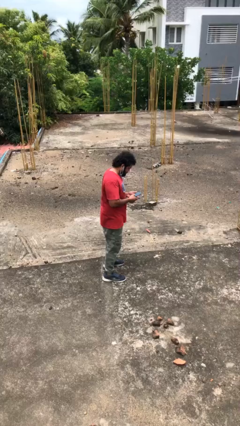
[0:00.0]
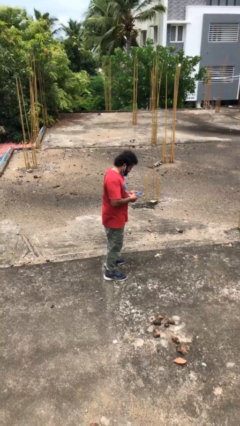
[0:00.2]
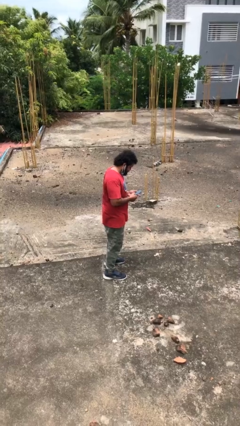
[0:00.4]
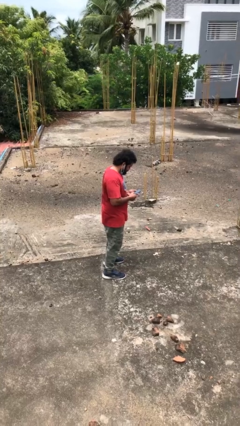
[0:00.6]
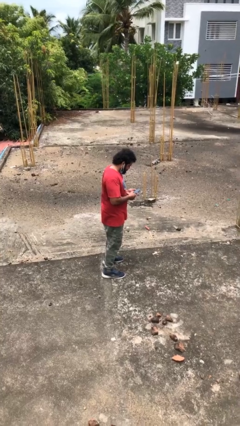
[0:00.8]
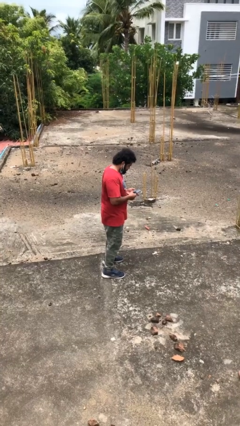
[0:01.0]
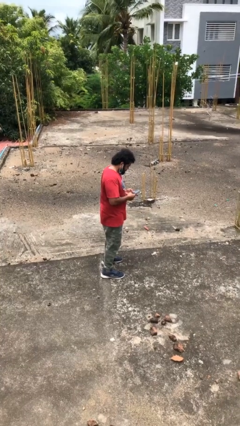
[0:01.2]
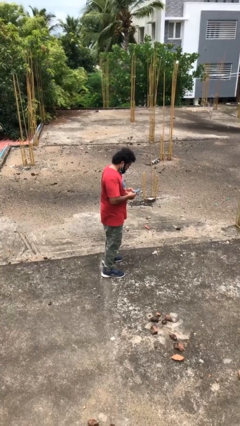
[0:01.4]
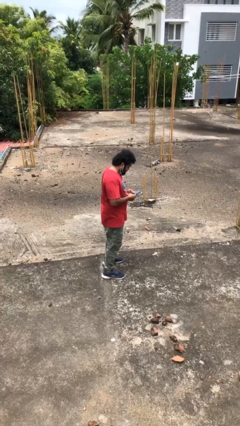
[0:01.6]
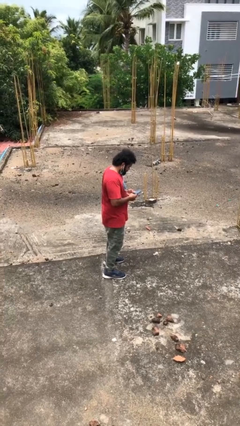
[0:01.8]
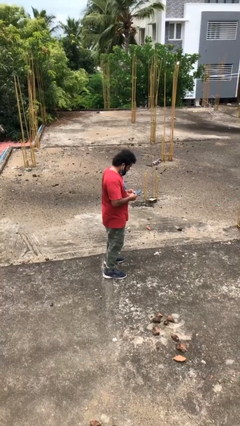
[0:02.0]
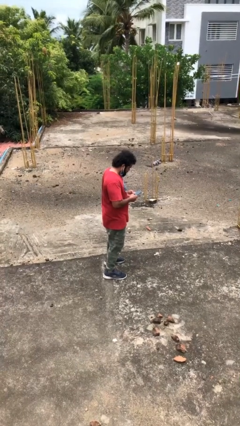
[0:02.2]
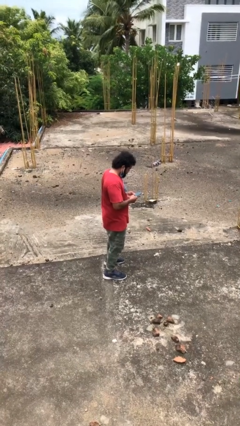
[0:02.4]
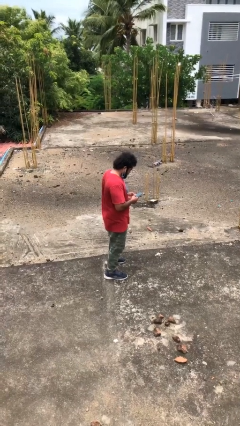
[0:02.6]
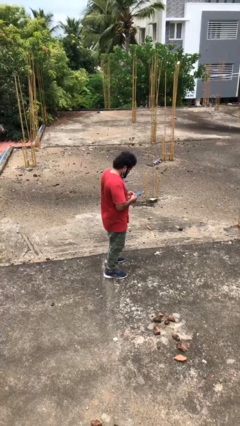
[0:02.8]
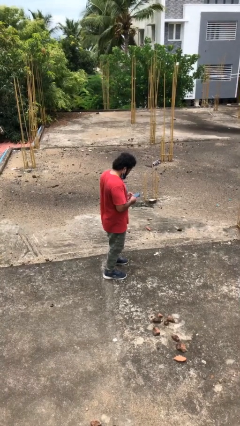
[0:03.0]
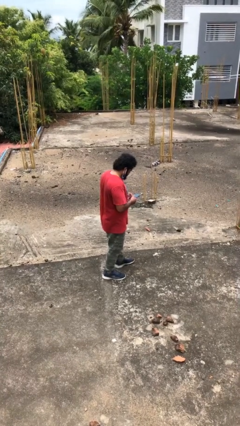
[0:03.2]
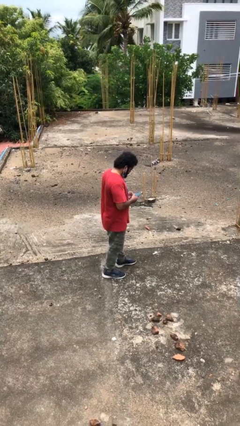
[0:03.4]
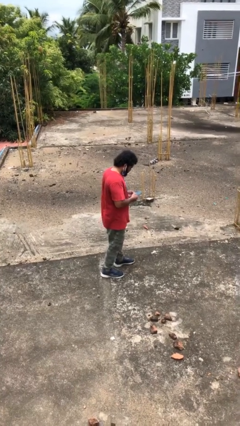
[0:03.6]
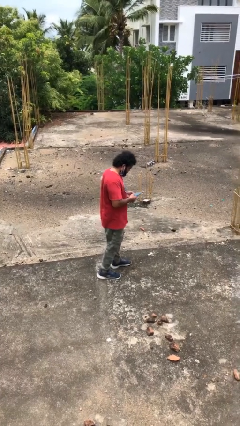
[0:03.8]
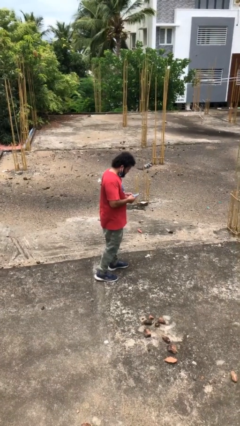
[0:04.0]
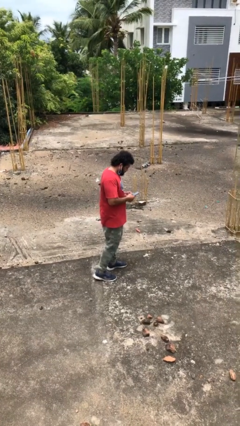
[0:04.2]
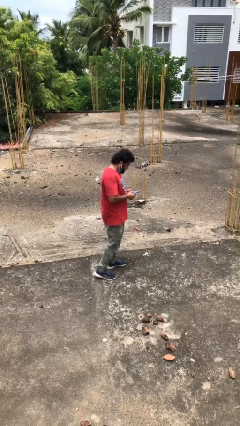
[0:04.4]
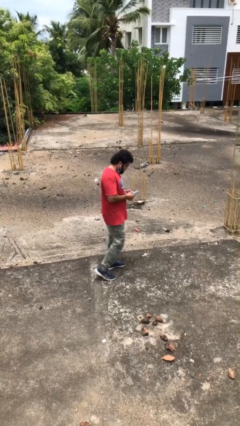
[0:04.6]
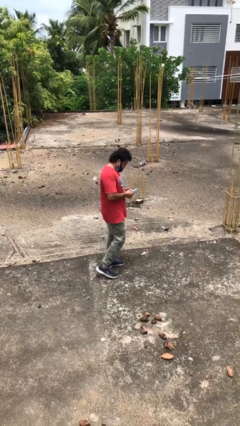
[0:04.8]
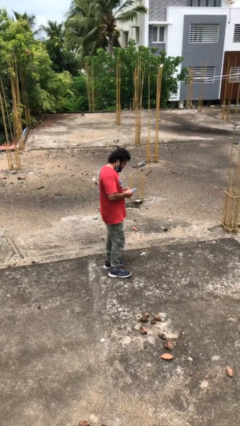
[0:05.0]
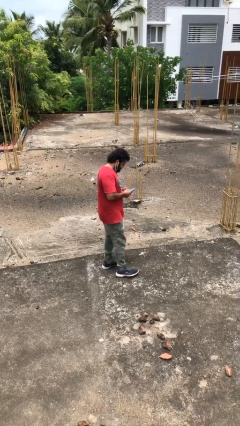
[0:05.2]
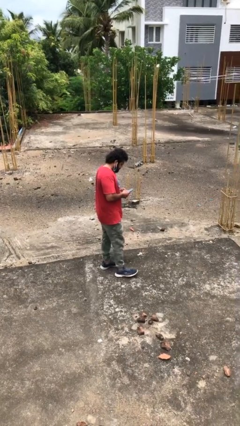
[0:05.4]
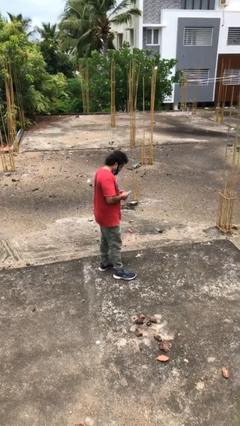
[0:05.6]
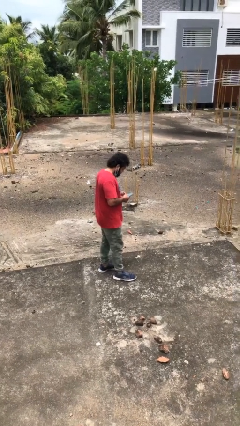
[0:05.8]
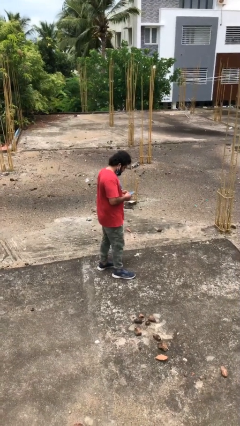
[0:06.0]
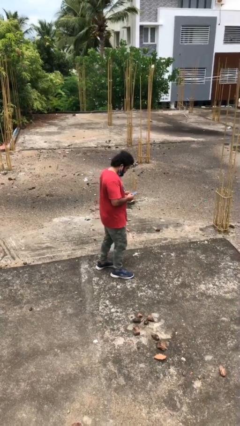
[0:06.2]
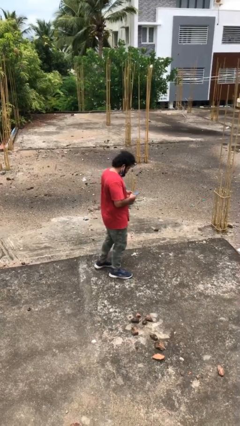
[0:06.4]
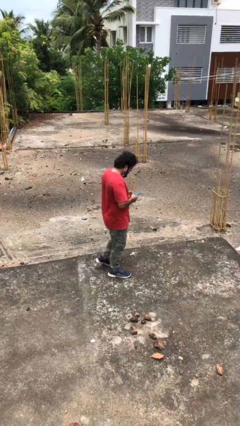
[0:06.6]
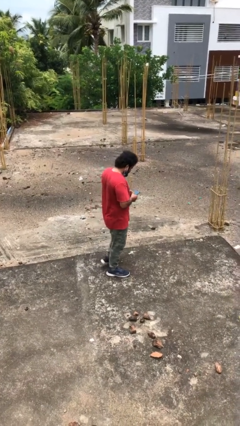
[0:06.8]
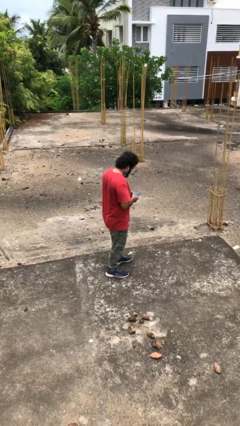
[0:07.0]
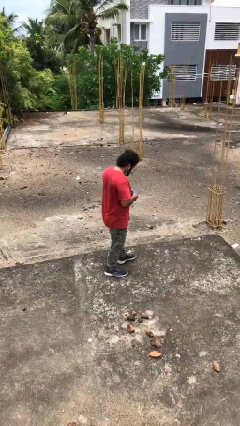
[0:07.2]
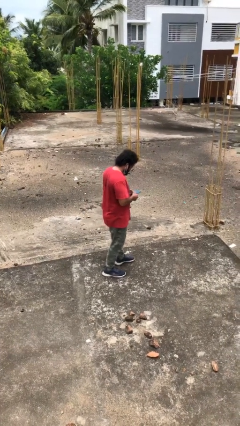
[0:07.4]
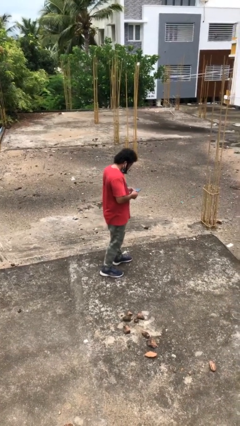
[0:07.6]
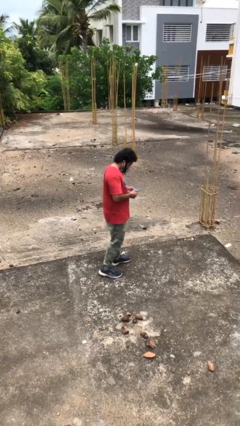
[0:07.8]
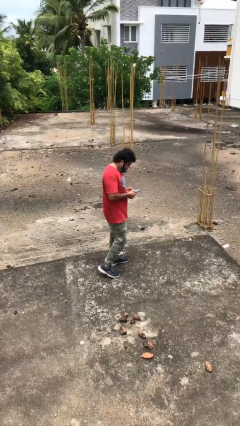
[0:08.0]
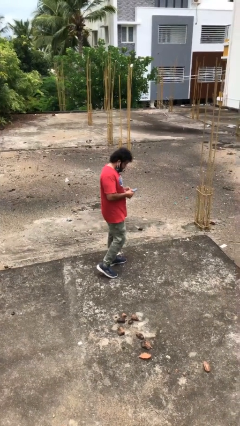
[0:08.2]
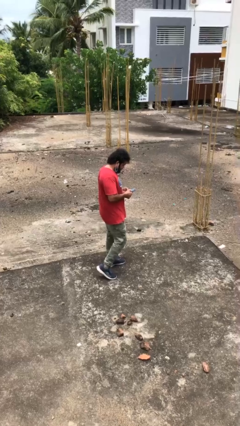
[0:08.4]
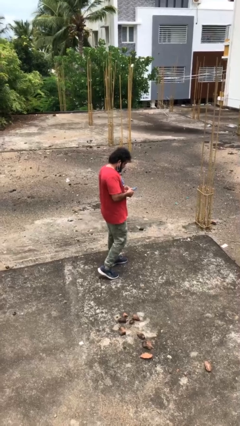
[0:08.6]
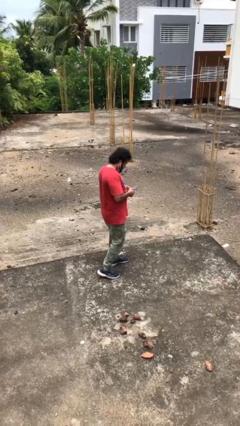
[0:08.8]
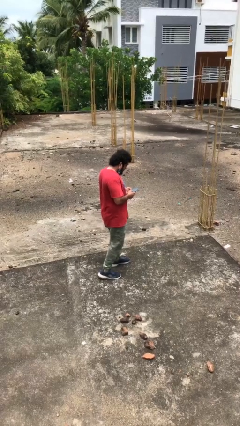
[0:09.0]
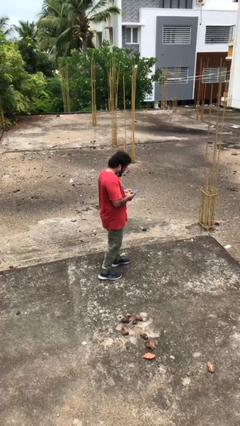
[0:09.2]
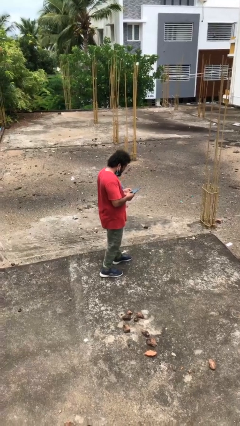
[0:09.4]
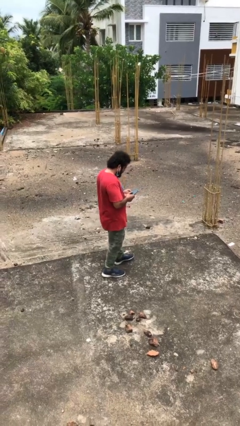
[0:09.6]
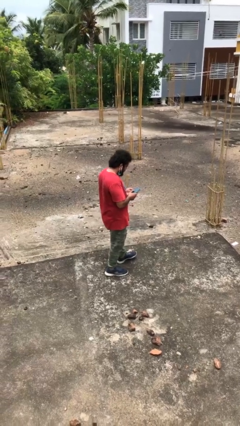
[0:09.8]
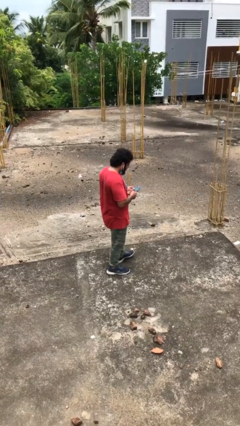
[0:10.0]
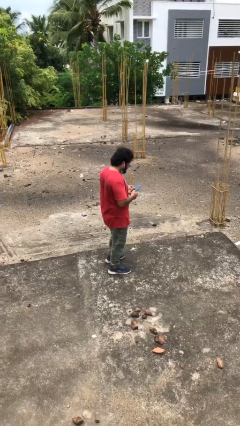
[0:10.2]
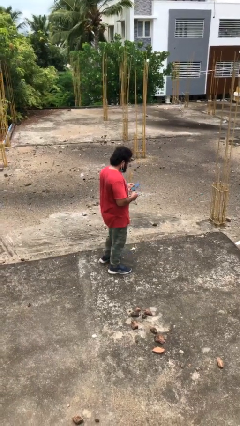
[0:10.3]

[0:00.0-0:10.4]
person texts on phone

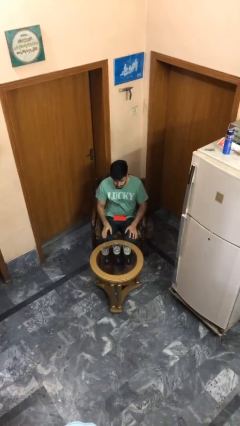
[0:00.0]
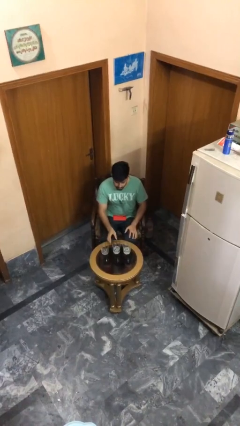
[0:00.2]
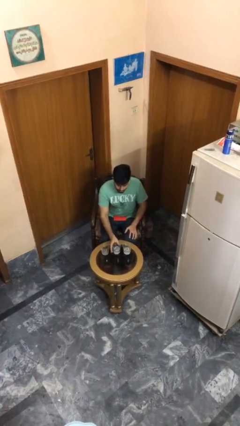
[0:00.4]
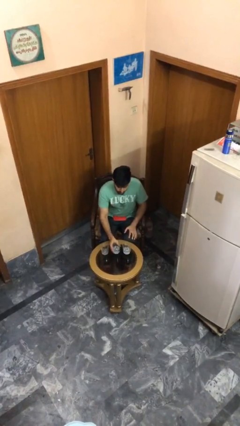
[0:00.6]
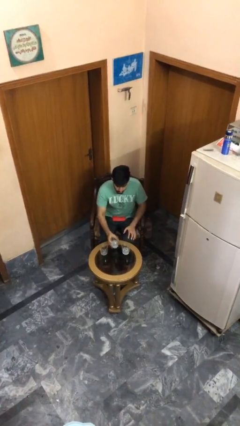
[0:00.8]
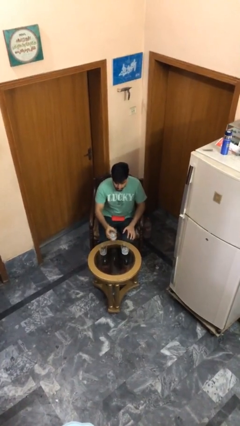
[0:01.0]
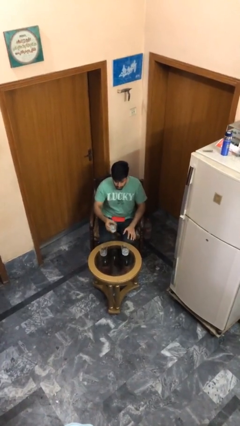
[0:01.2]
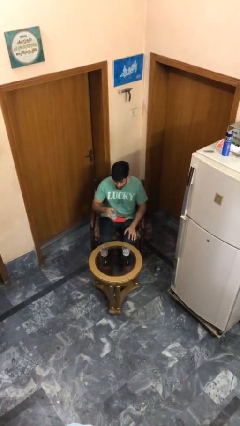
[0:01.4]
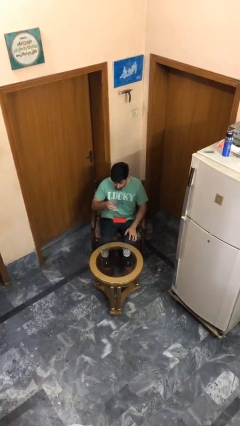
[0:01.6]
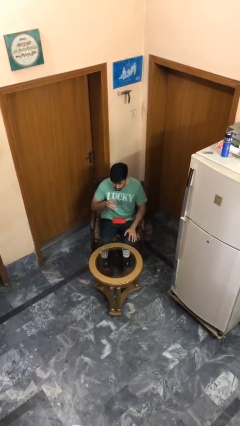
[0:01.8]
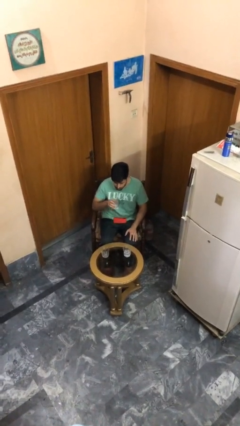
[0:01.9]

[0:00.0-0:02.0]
person picks up object from table

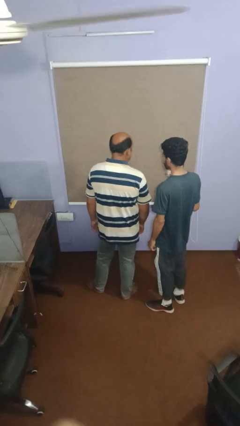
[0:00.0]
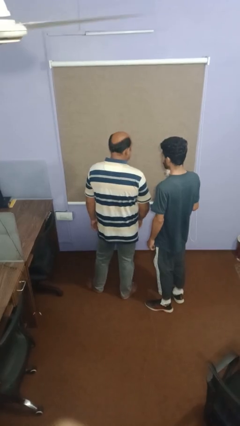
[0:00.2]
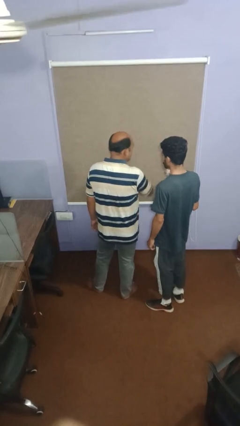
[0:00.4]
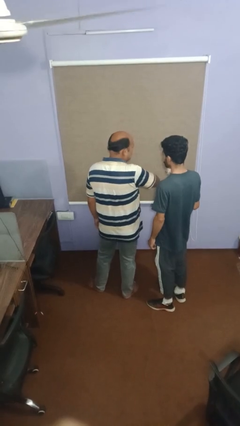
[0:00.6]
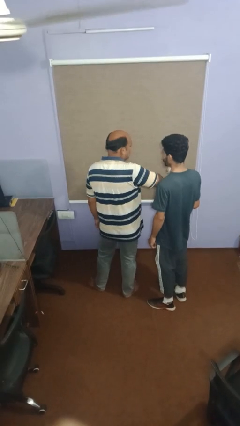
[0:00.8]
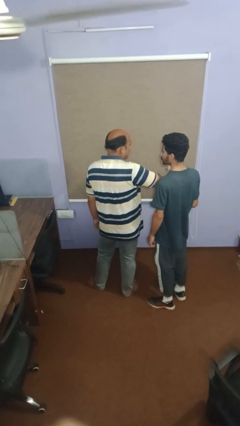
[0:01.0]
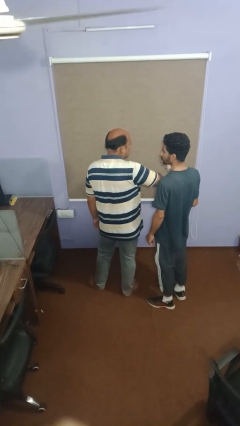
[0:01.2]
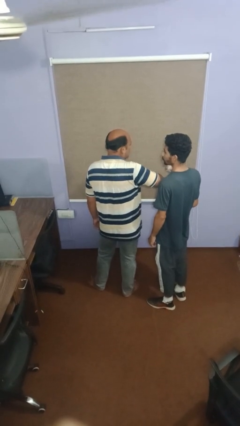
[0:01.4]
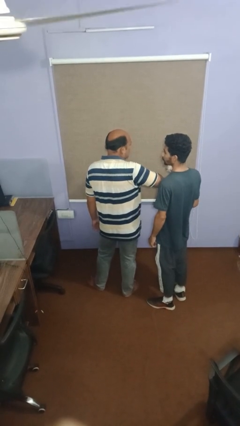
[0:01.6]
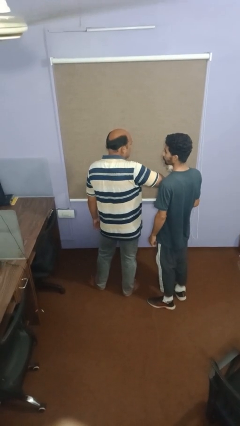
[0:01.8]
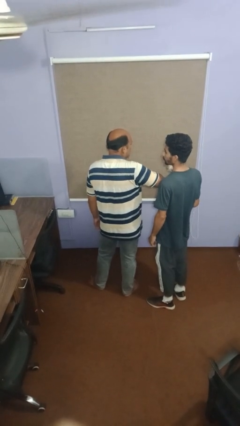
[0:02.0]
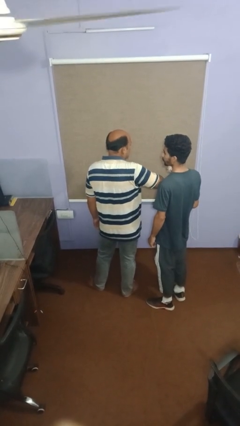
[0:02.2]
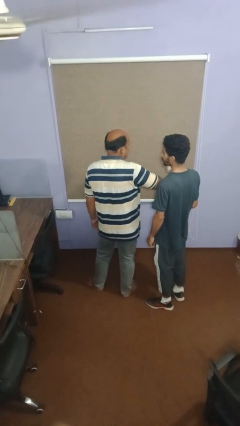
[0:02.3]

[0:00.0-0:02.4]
person nudges person with elbow

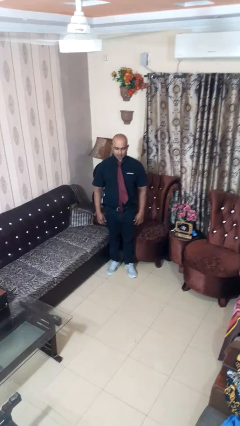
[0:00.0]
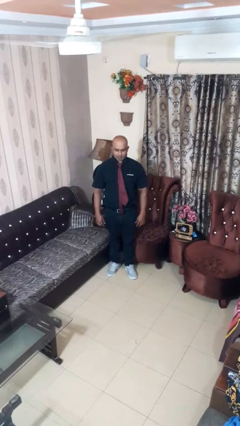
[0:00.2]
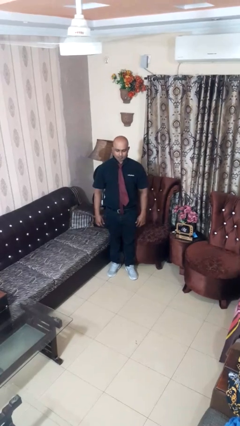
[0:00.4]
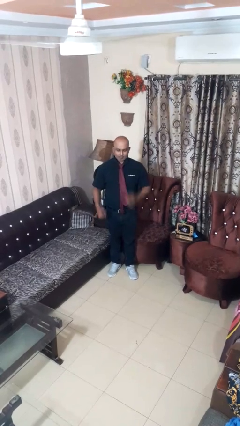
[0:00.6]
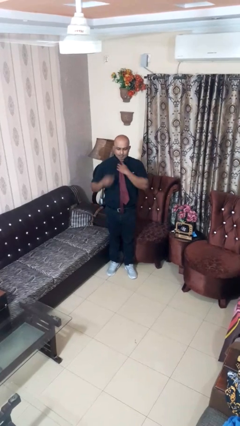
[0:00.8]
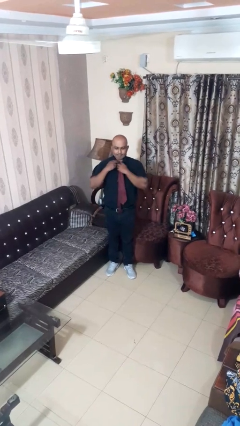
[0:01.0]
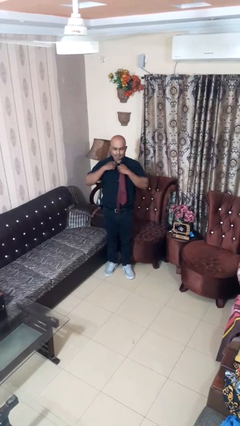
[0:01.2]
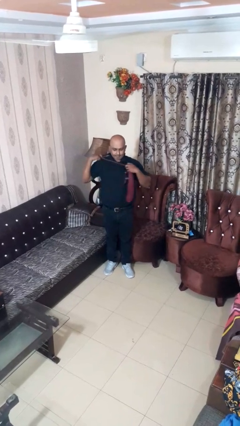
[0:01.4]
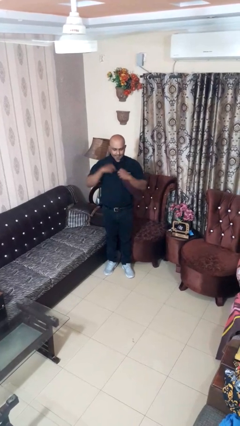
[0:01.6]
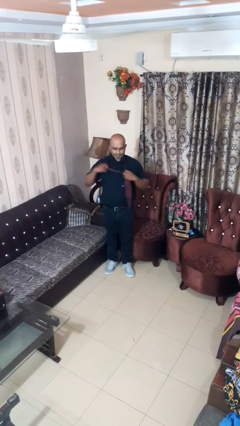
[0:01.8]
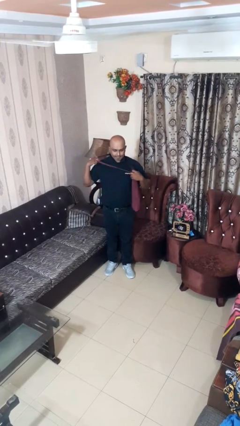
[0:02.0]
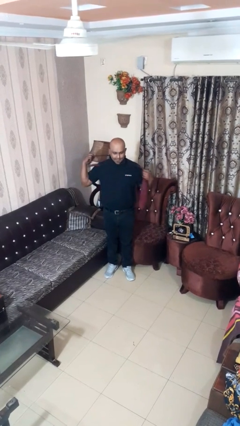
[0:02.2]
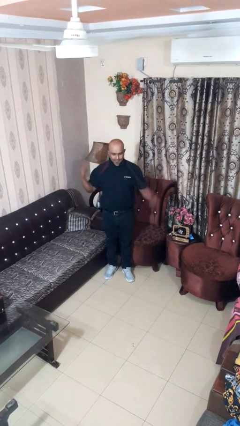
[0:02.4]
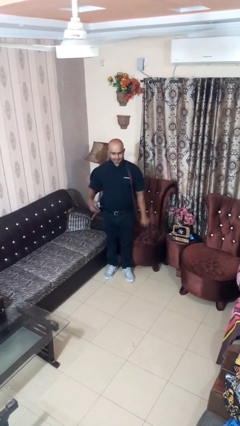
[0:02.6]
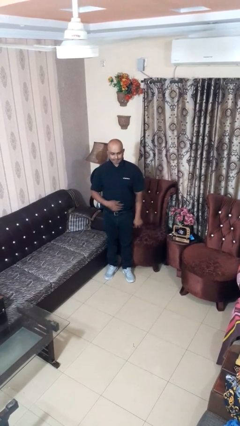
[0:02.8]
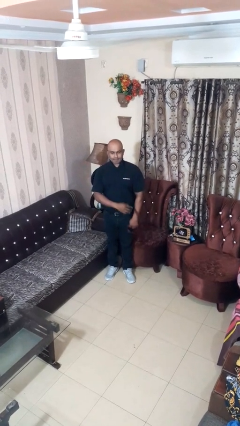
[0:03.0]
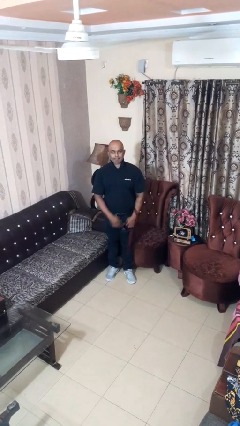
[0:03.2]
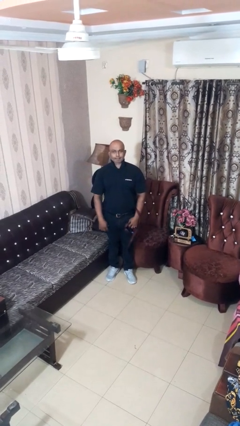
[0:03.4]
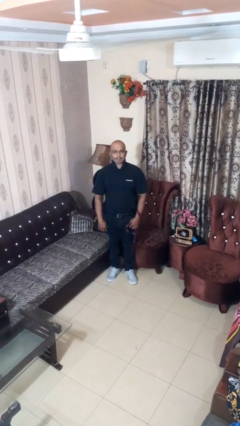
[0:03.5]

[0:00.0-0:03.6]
person takes off necktie
